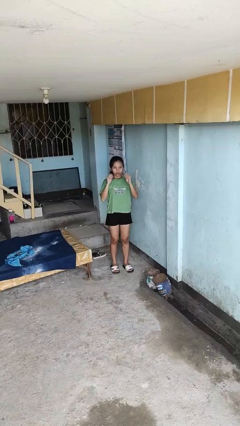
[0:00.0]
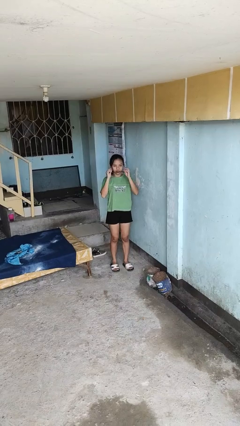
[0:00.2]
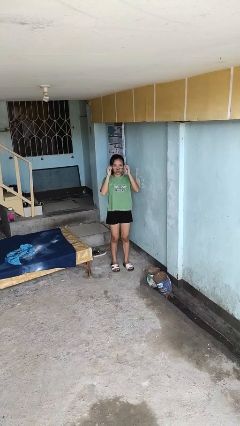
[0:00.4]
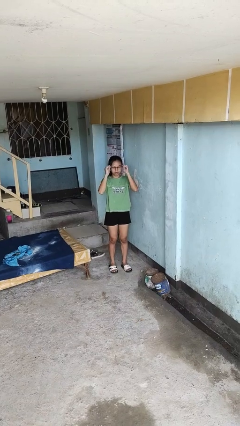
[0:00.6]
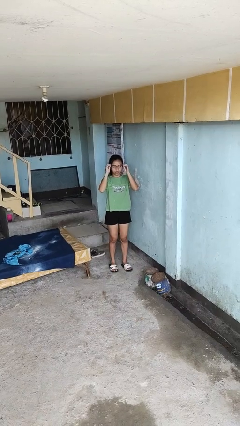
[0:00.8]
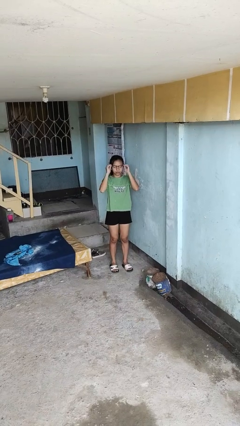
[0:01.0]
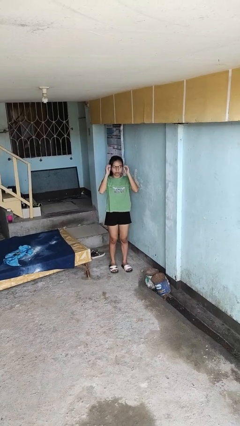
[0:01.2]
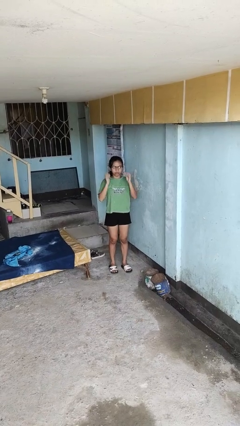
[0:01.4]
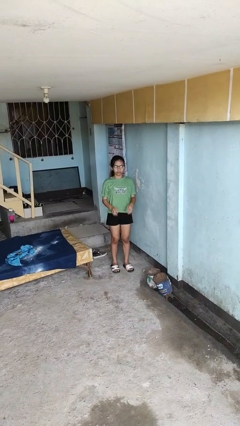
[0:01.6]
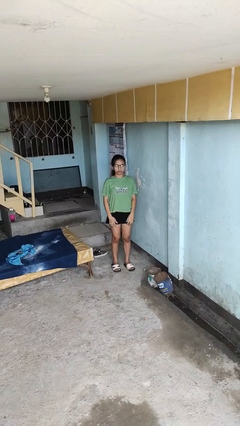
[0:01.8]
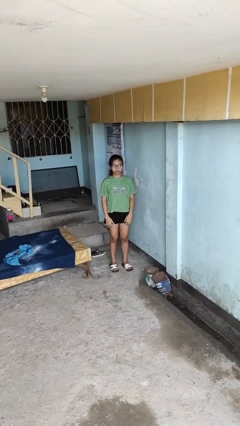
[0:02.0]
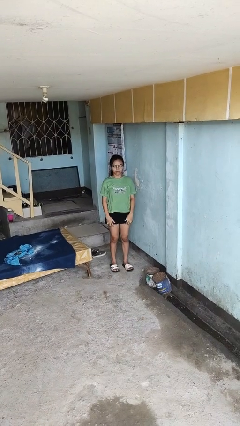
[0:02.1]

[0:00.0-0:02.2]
person puts on glasses

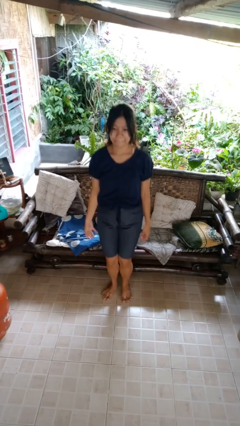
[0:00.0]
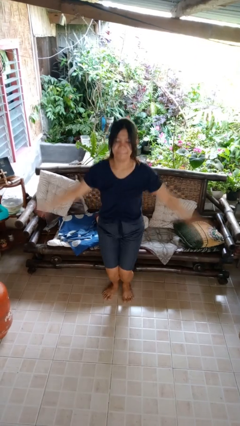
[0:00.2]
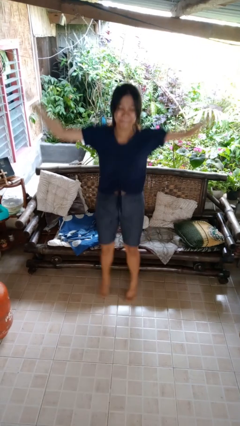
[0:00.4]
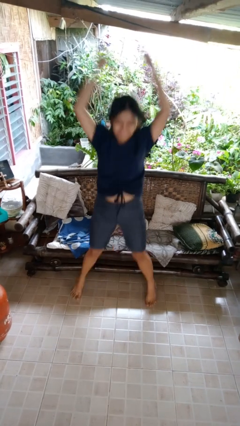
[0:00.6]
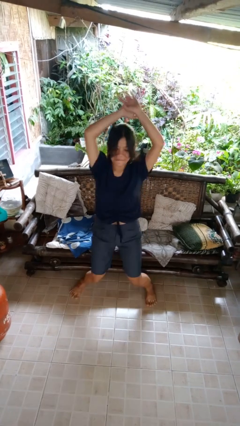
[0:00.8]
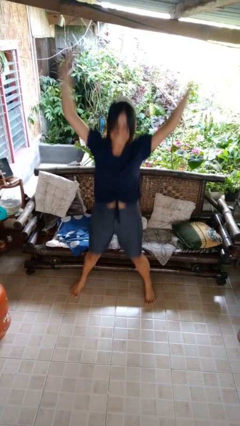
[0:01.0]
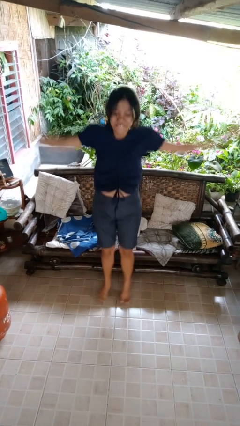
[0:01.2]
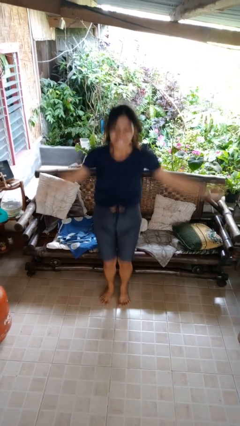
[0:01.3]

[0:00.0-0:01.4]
person exercises with jumping jacks

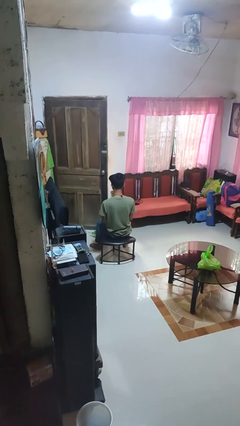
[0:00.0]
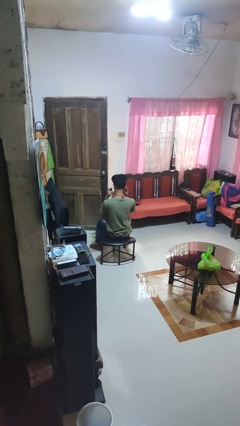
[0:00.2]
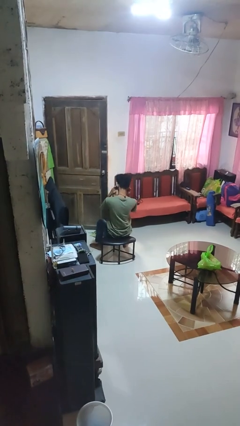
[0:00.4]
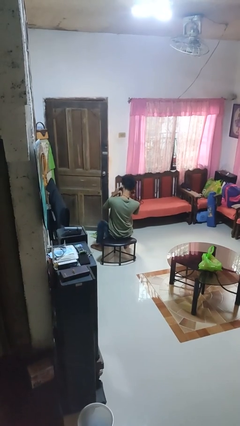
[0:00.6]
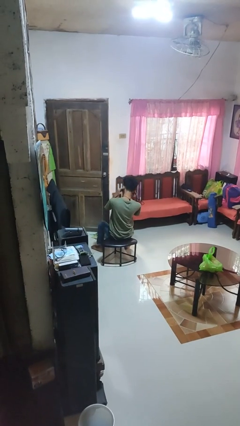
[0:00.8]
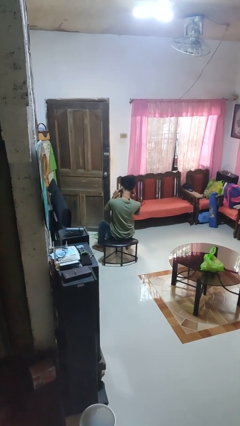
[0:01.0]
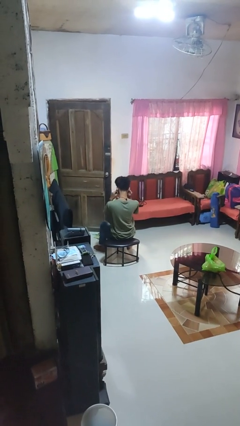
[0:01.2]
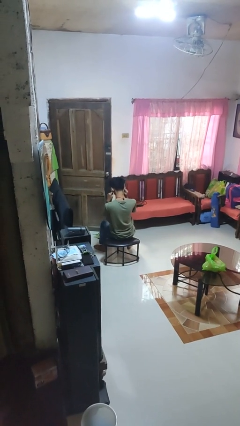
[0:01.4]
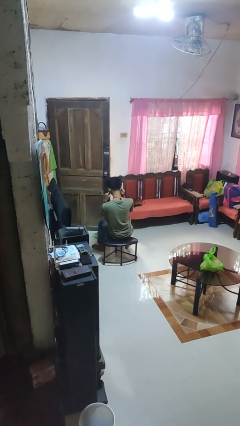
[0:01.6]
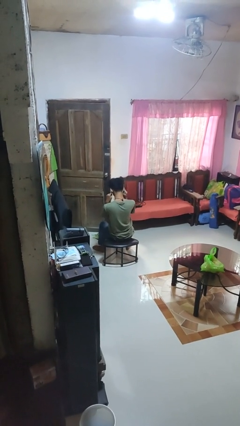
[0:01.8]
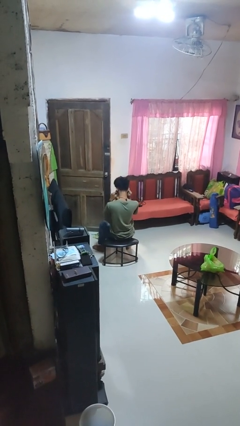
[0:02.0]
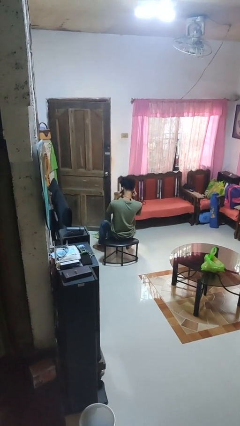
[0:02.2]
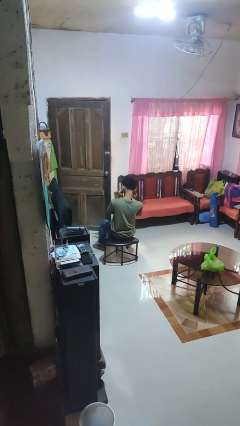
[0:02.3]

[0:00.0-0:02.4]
person puts fingers in ear

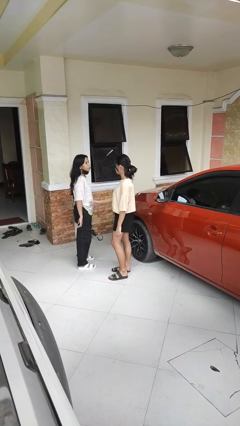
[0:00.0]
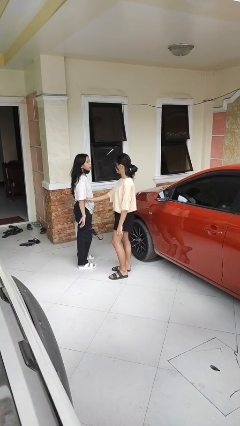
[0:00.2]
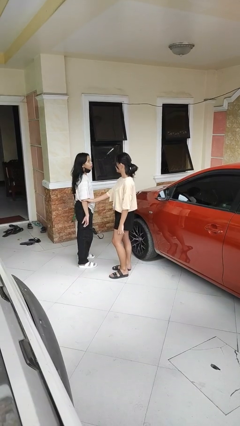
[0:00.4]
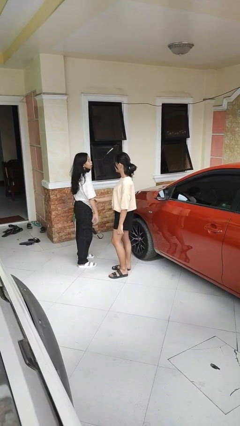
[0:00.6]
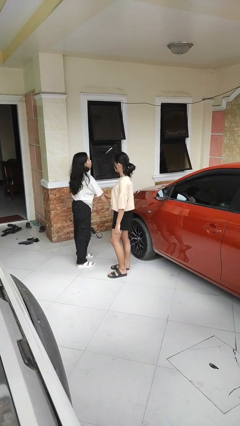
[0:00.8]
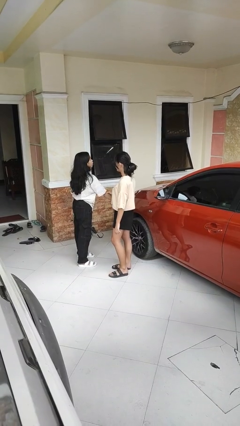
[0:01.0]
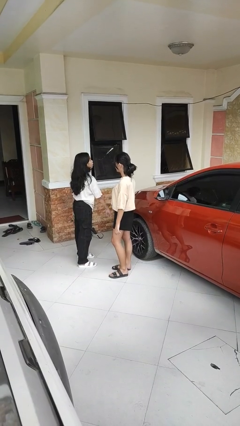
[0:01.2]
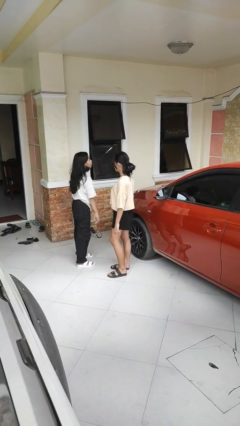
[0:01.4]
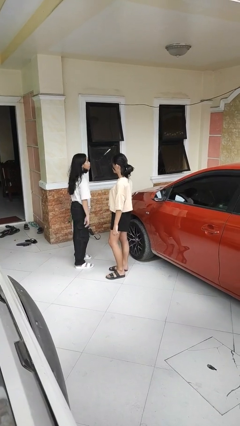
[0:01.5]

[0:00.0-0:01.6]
person grabs person by forearm

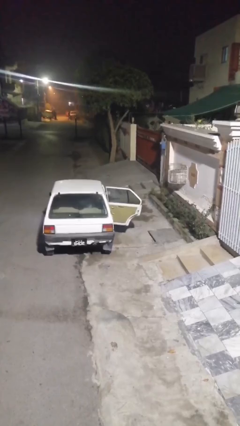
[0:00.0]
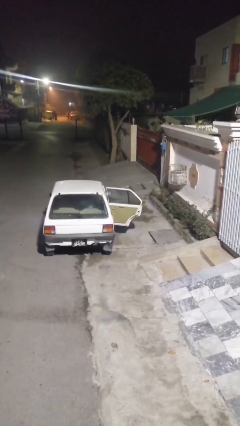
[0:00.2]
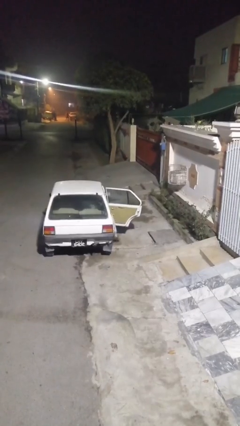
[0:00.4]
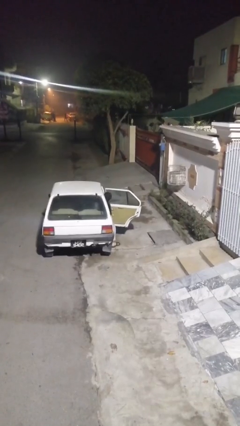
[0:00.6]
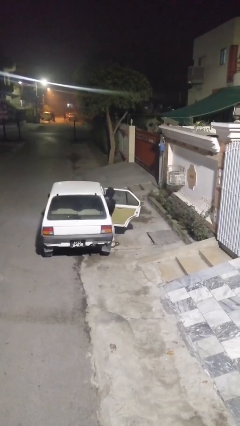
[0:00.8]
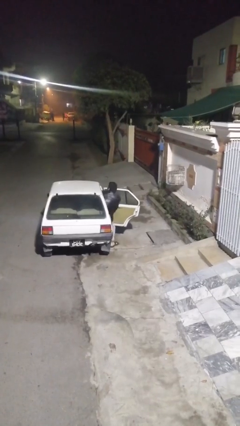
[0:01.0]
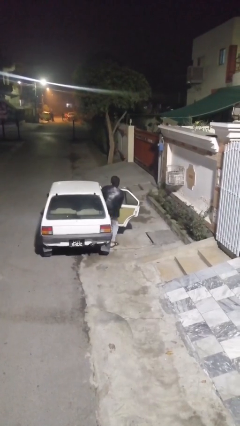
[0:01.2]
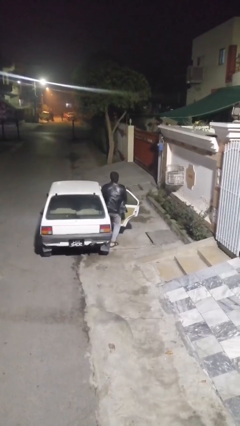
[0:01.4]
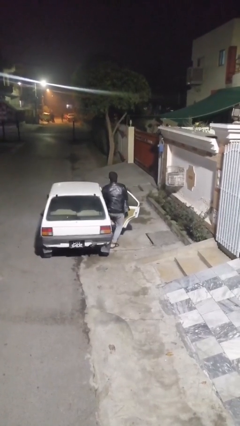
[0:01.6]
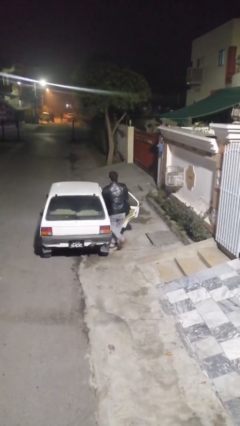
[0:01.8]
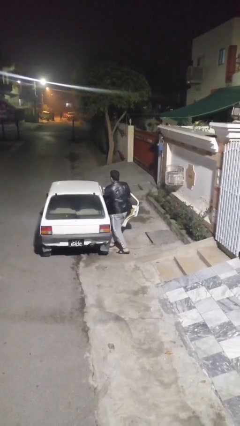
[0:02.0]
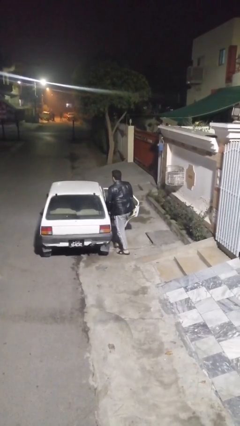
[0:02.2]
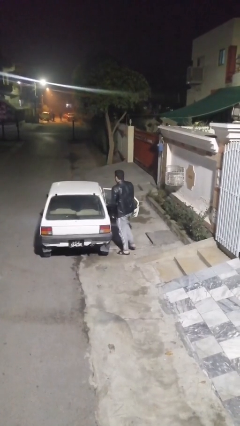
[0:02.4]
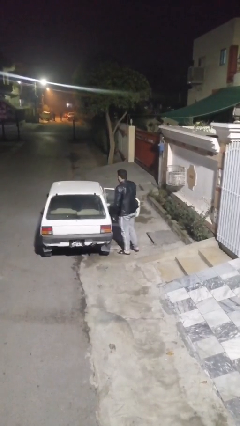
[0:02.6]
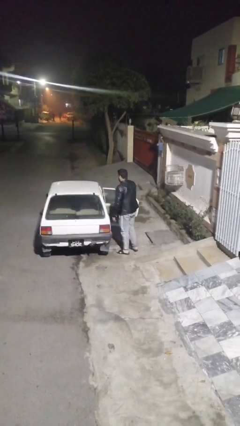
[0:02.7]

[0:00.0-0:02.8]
person exits car

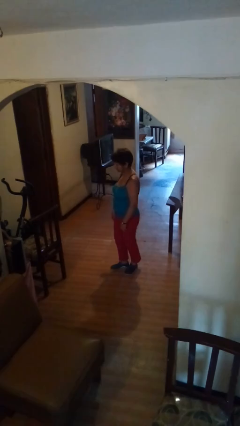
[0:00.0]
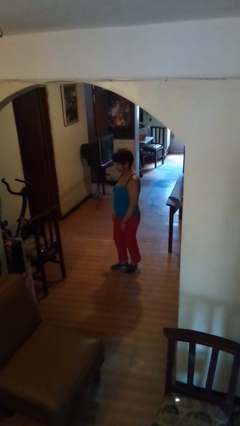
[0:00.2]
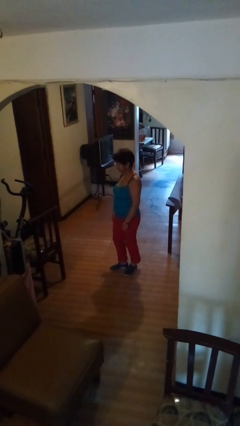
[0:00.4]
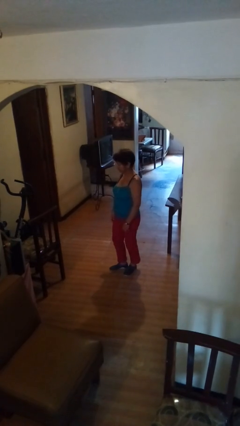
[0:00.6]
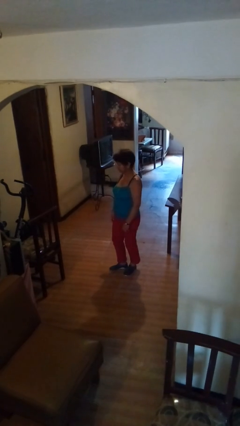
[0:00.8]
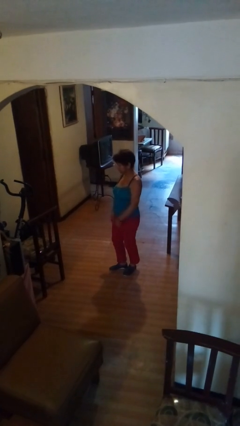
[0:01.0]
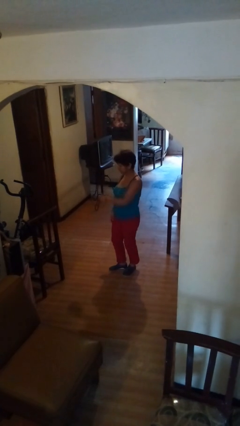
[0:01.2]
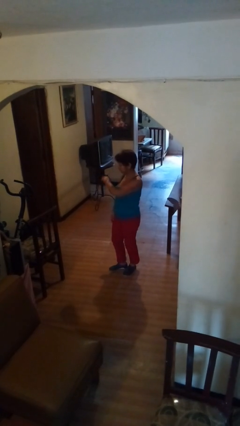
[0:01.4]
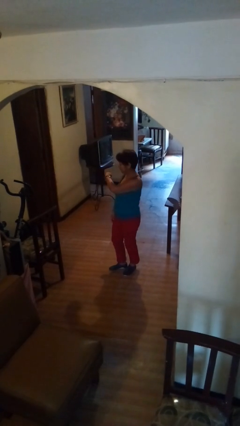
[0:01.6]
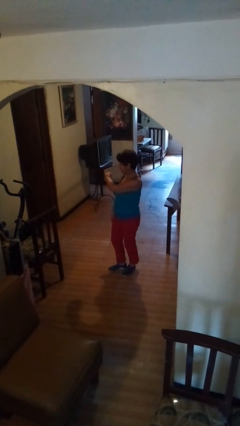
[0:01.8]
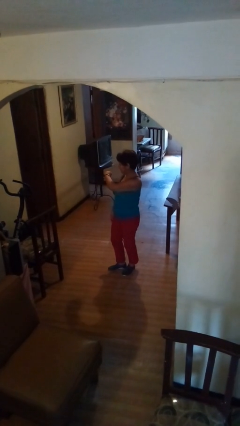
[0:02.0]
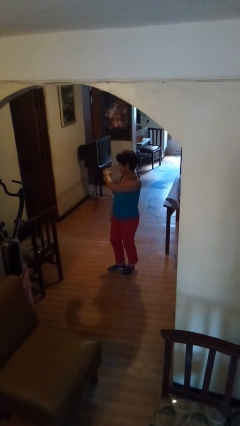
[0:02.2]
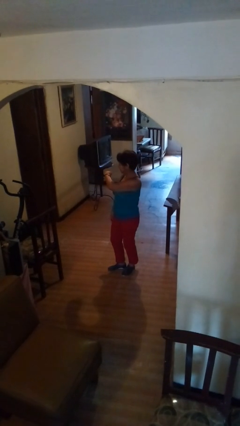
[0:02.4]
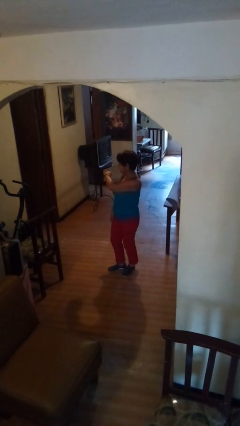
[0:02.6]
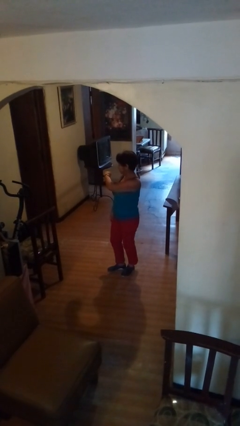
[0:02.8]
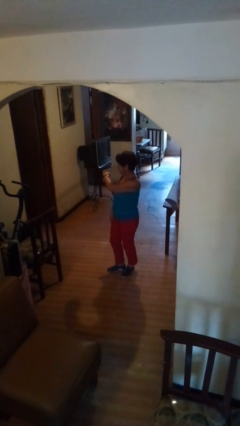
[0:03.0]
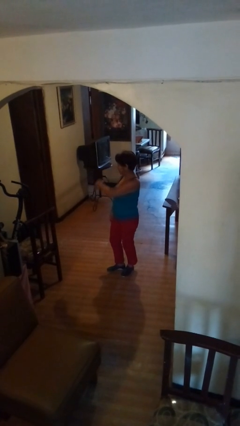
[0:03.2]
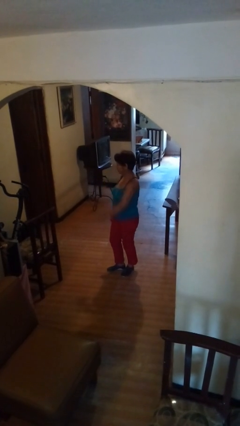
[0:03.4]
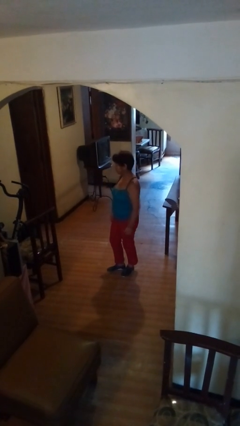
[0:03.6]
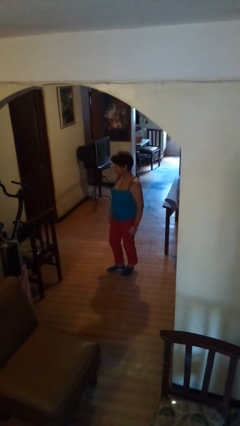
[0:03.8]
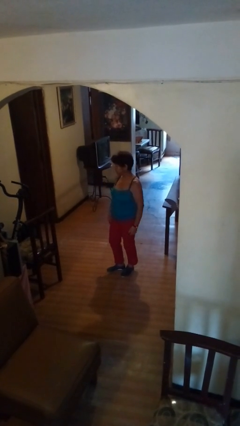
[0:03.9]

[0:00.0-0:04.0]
person looks at wristwatch

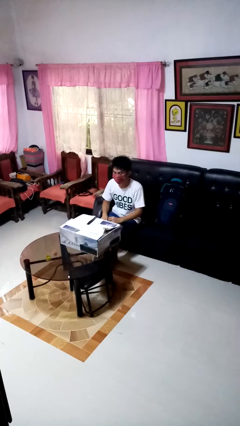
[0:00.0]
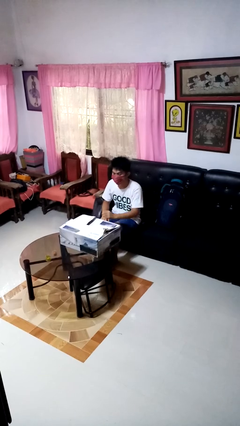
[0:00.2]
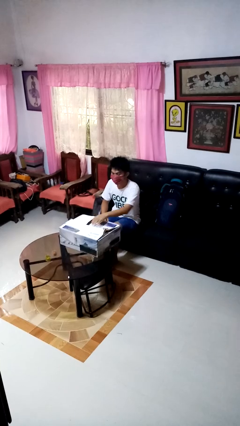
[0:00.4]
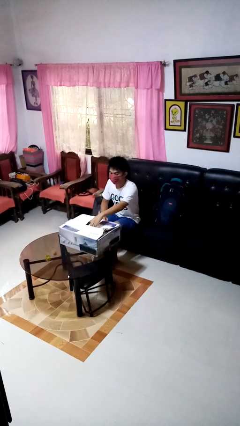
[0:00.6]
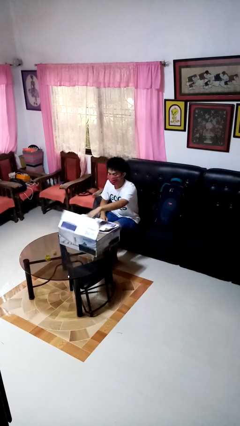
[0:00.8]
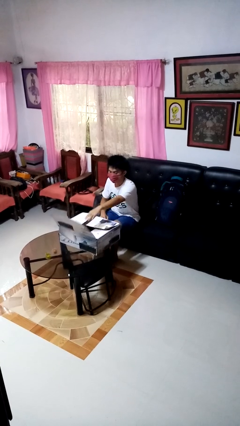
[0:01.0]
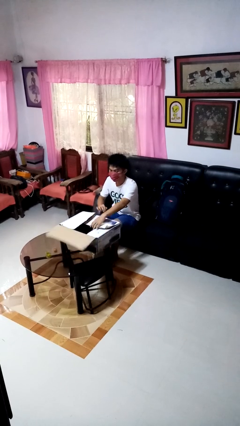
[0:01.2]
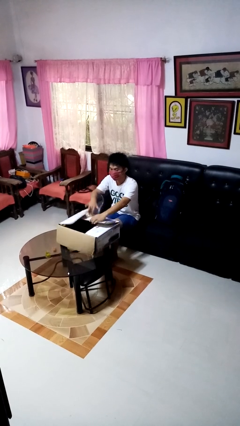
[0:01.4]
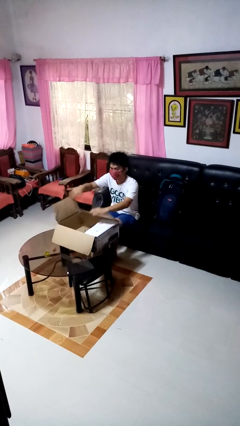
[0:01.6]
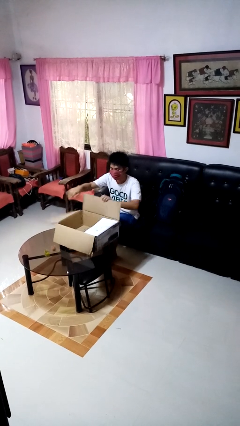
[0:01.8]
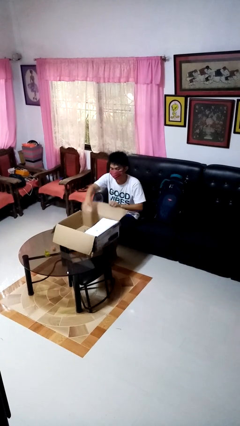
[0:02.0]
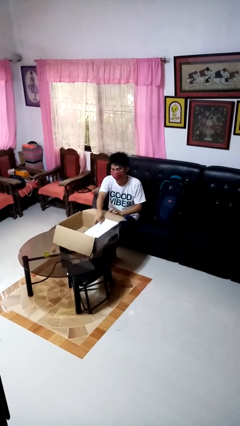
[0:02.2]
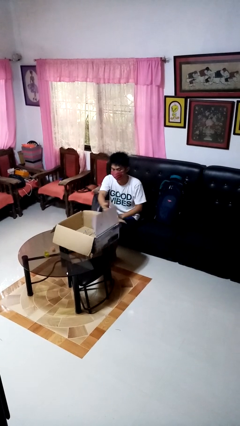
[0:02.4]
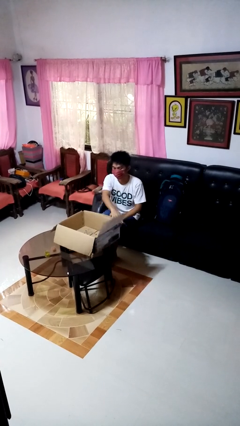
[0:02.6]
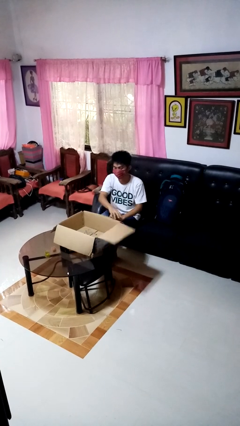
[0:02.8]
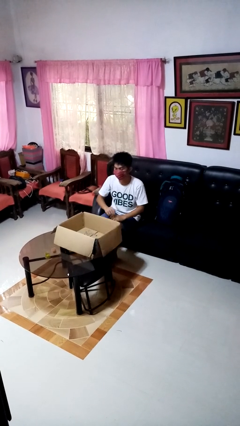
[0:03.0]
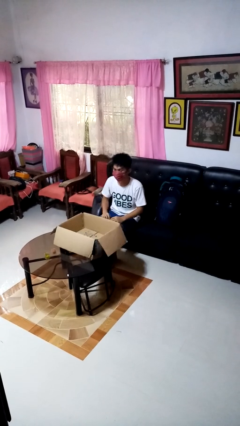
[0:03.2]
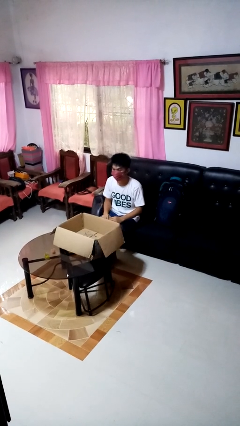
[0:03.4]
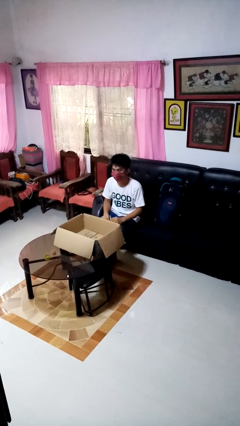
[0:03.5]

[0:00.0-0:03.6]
person opens box
